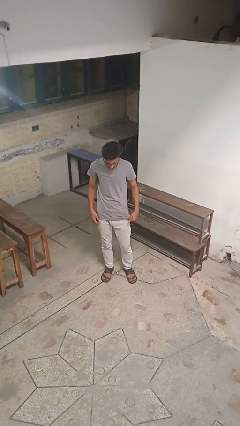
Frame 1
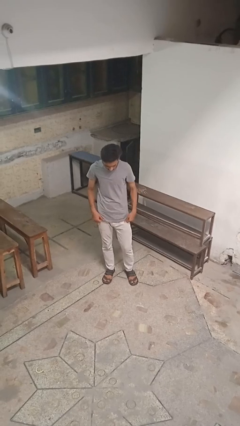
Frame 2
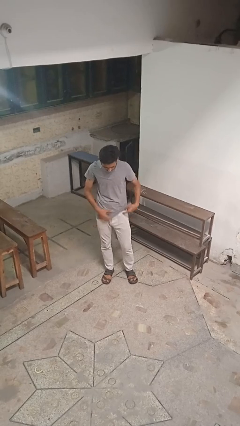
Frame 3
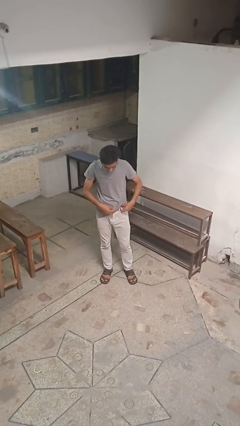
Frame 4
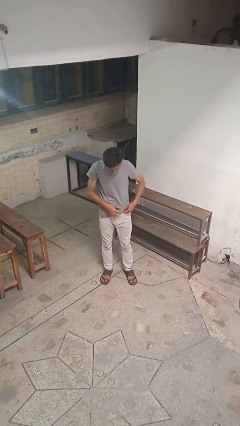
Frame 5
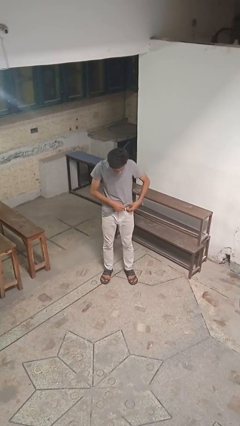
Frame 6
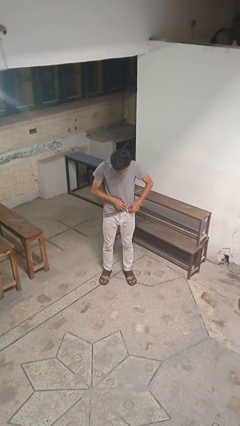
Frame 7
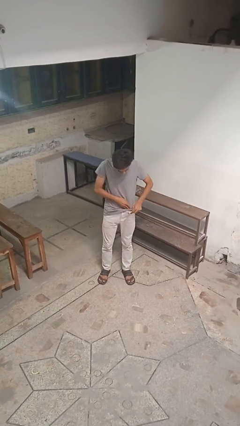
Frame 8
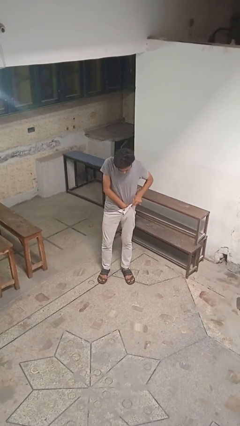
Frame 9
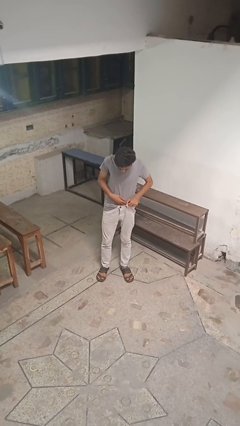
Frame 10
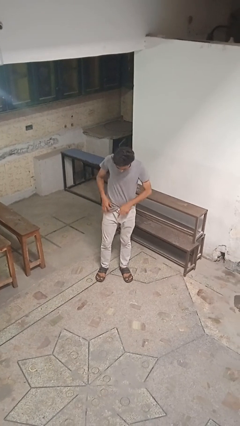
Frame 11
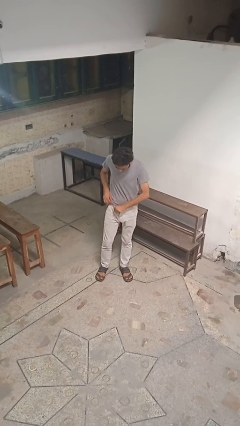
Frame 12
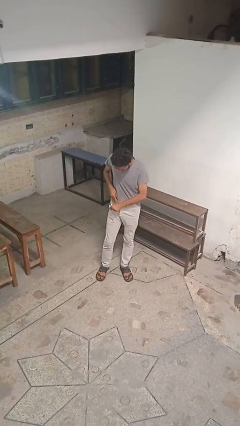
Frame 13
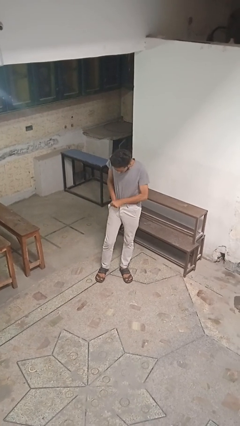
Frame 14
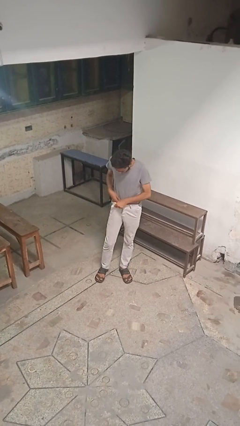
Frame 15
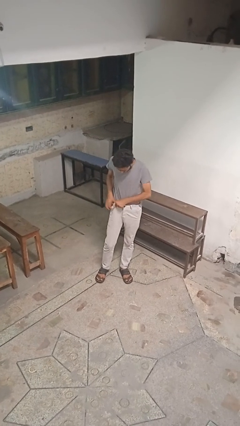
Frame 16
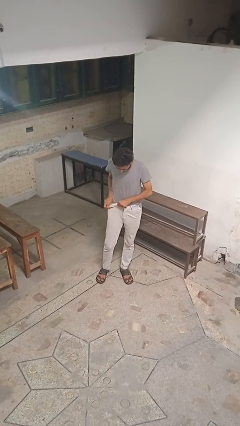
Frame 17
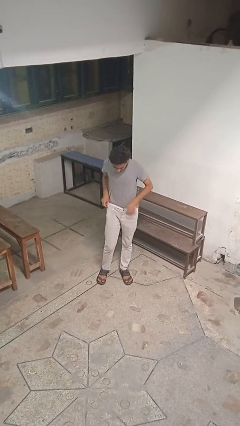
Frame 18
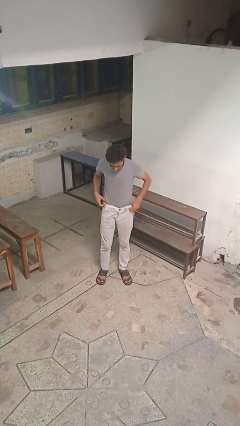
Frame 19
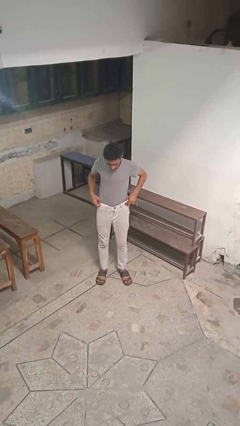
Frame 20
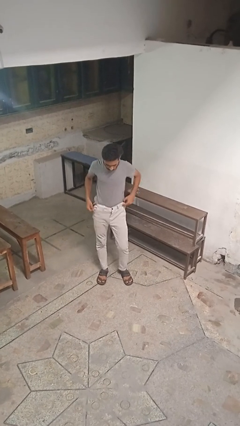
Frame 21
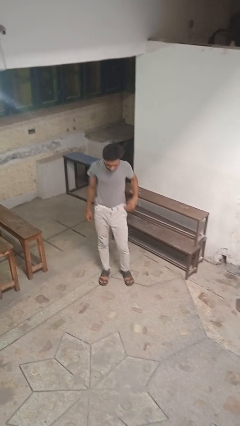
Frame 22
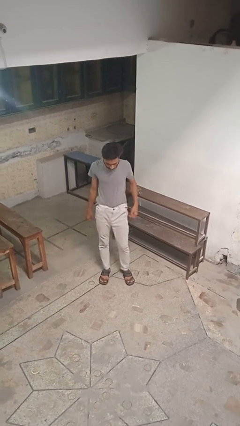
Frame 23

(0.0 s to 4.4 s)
person tucks in shirt

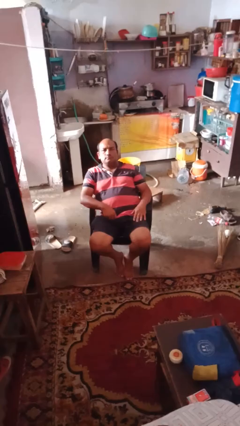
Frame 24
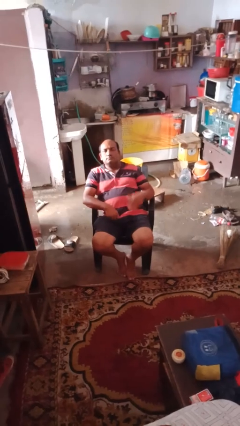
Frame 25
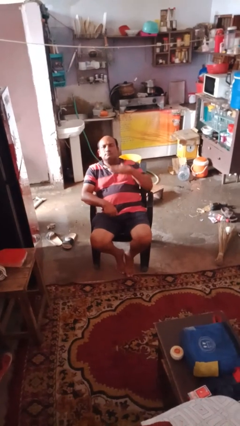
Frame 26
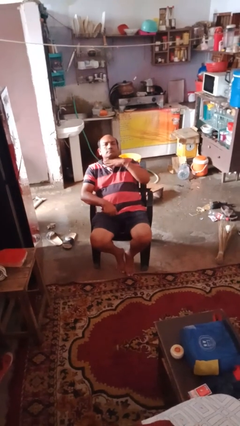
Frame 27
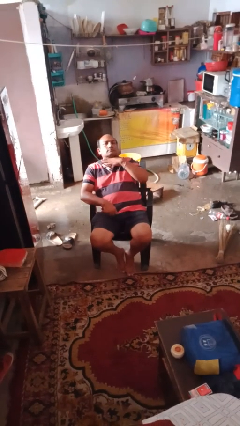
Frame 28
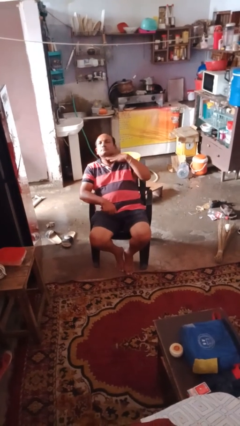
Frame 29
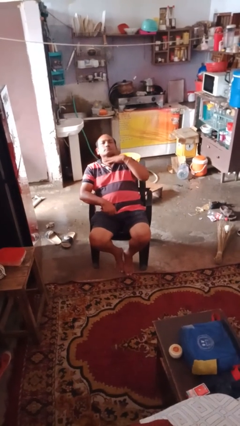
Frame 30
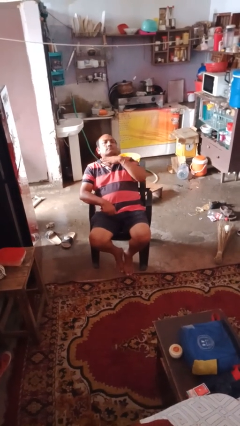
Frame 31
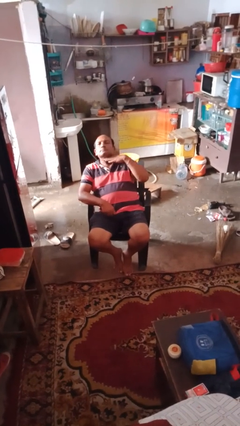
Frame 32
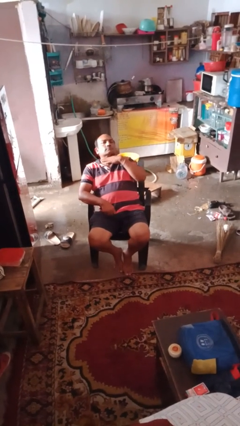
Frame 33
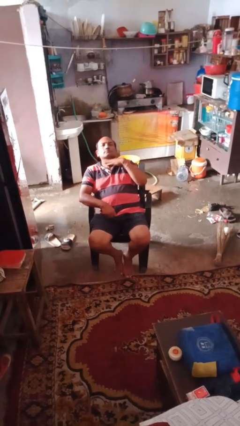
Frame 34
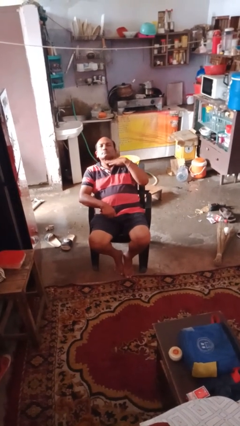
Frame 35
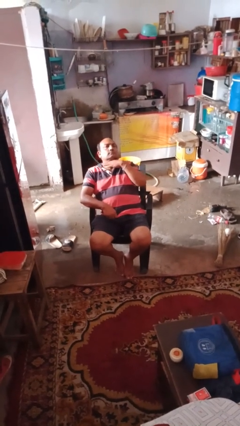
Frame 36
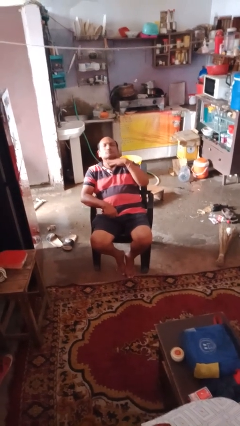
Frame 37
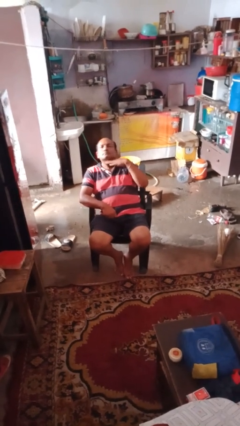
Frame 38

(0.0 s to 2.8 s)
person gestures cut

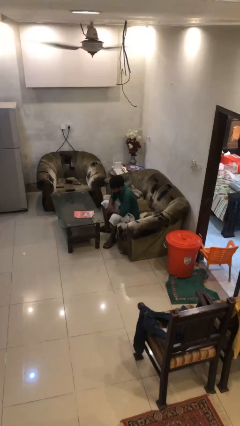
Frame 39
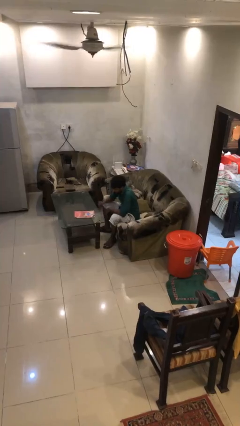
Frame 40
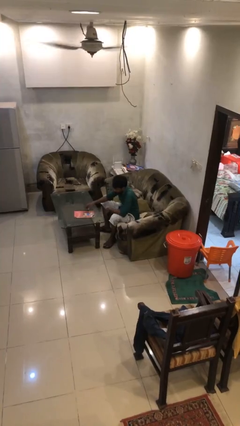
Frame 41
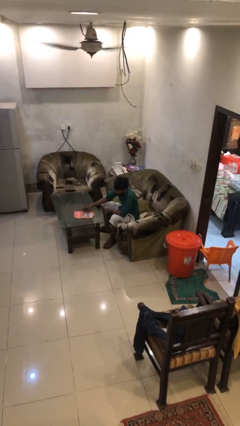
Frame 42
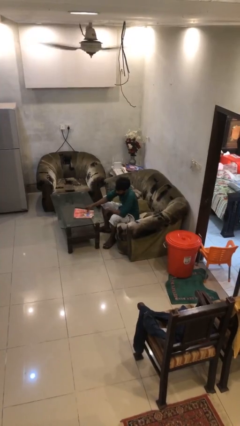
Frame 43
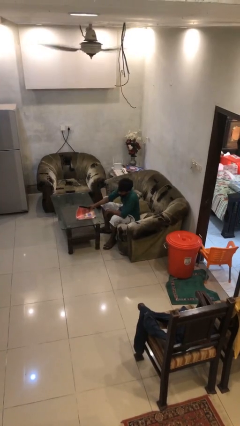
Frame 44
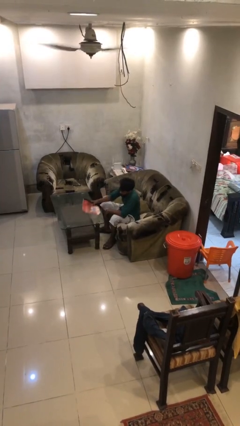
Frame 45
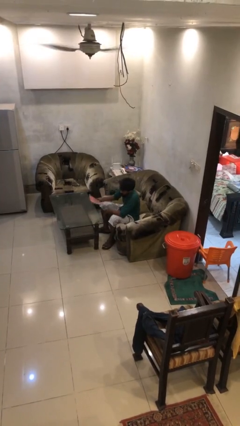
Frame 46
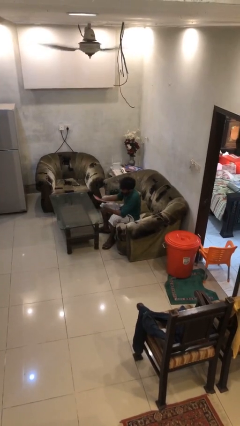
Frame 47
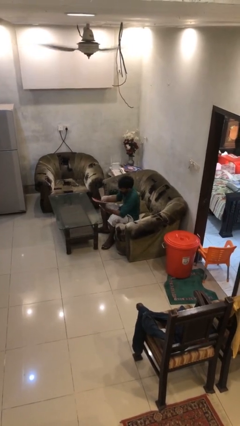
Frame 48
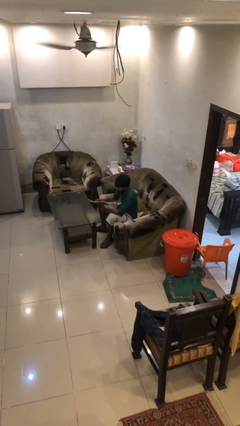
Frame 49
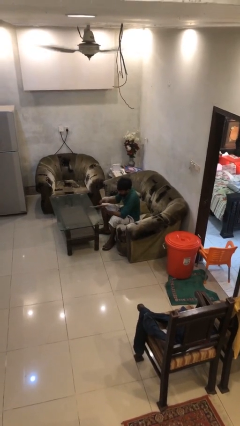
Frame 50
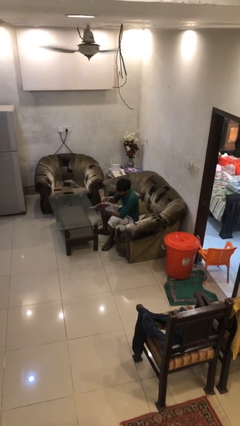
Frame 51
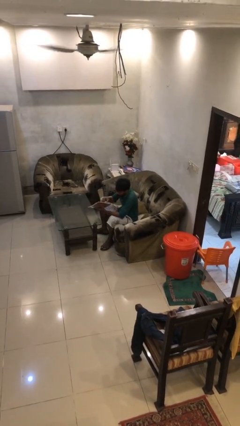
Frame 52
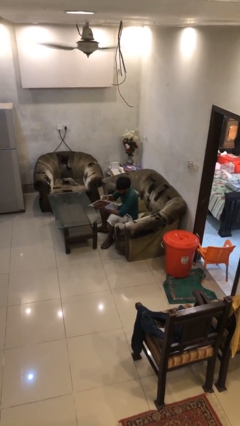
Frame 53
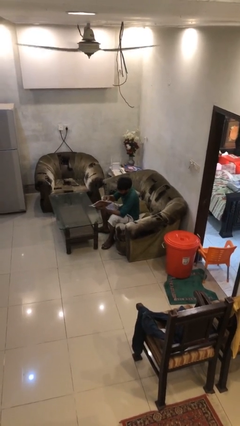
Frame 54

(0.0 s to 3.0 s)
person picks up object from table

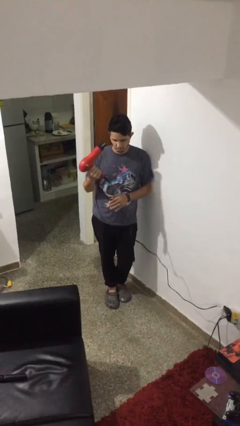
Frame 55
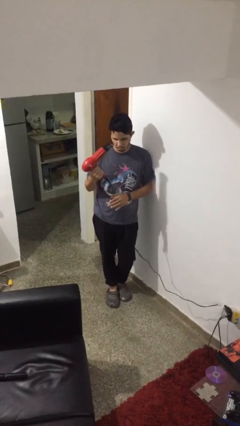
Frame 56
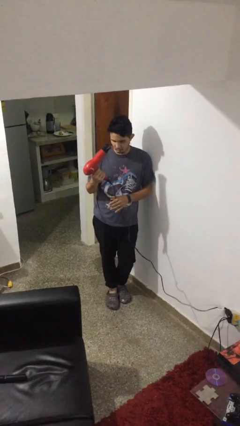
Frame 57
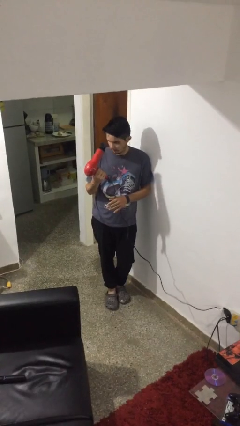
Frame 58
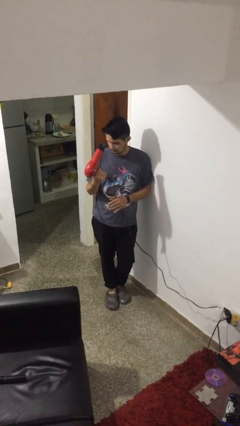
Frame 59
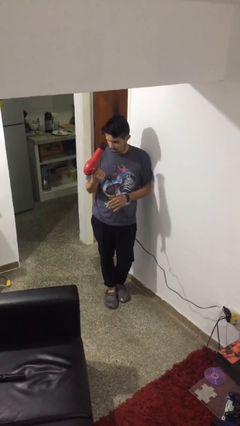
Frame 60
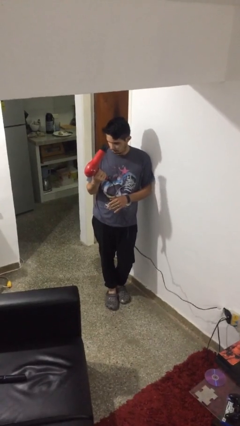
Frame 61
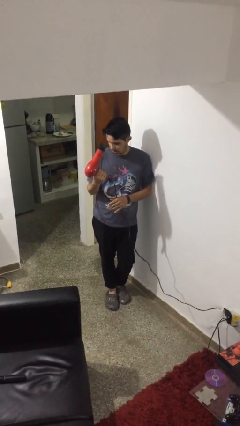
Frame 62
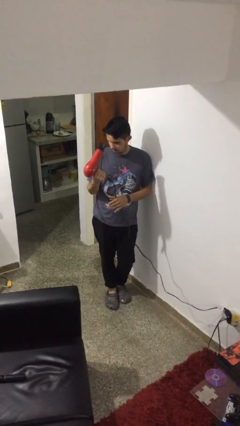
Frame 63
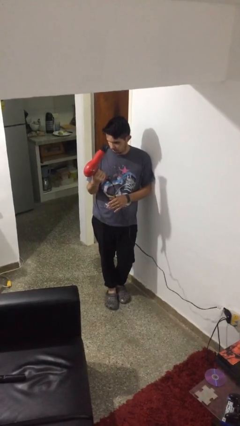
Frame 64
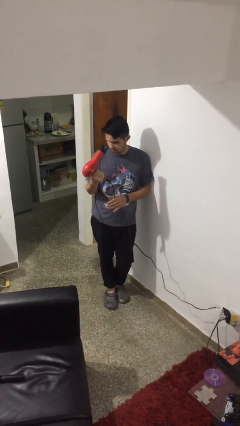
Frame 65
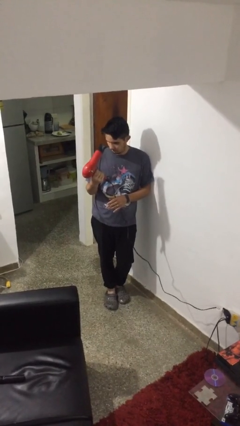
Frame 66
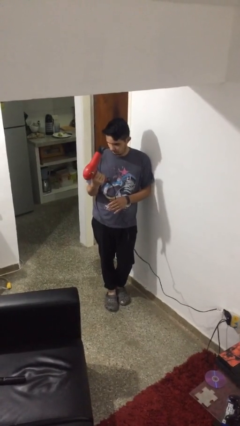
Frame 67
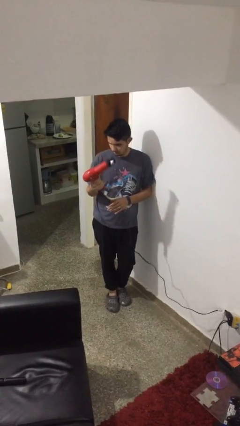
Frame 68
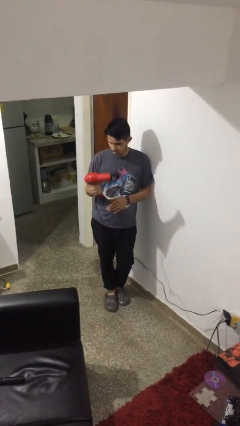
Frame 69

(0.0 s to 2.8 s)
person dries hair with hairdryer

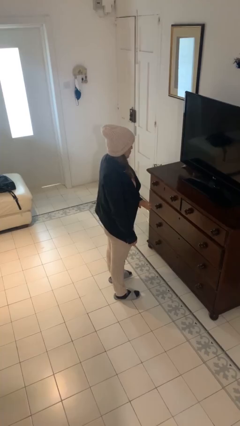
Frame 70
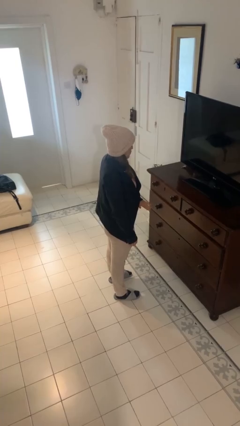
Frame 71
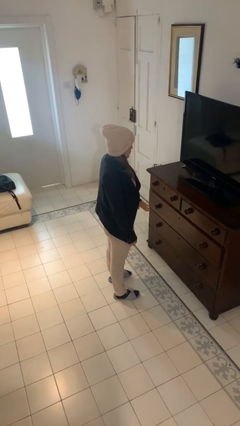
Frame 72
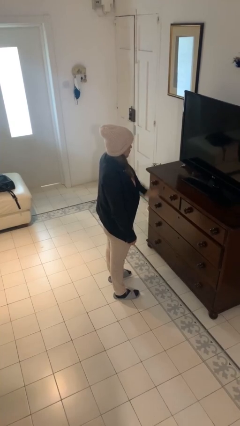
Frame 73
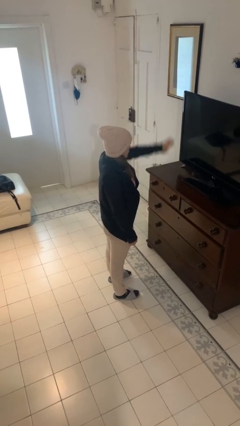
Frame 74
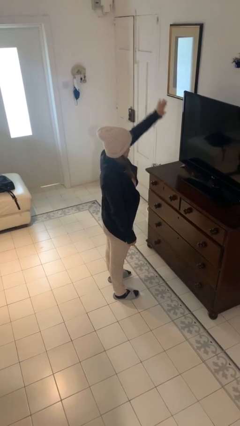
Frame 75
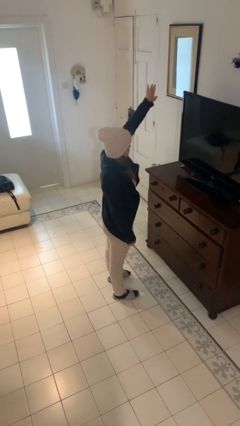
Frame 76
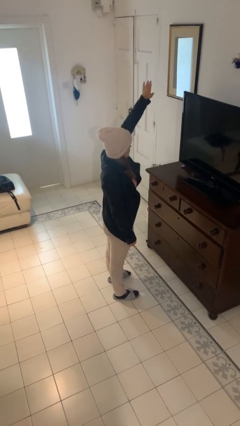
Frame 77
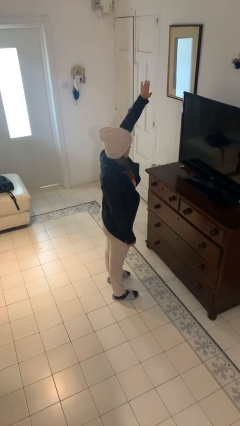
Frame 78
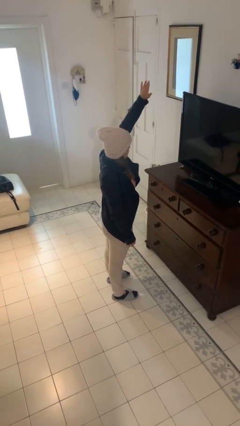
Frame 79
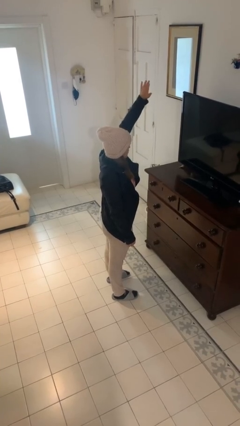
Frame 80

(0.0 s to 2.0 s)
person gestures swipe up

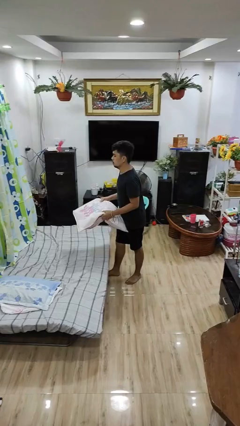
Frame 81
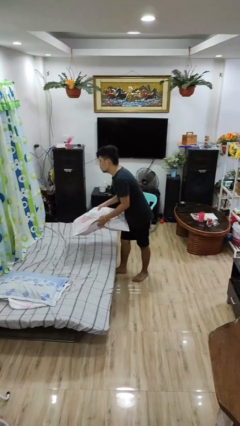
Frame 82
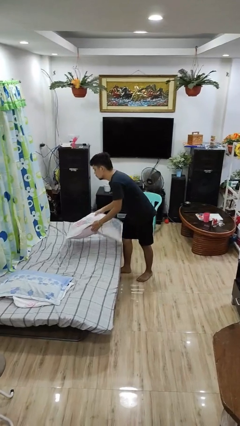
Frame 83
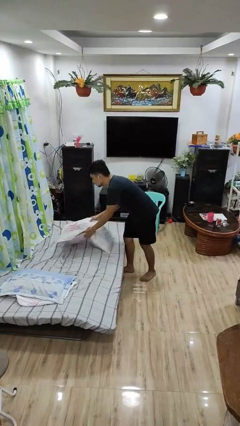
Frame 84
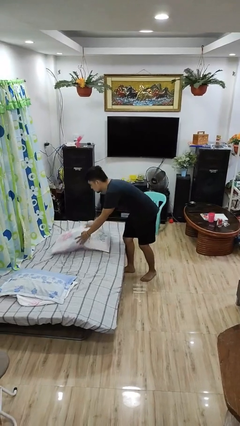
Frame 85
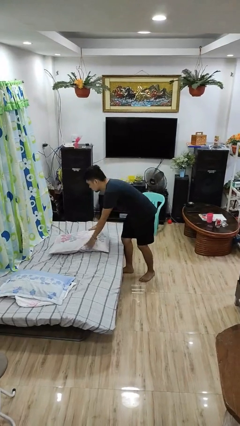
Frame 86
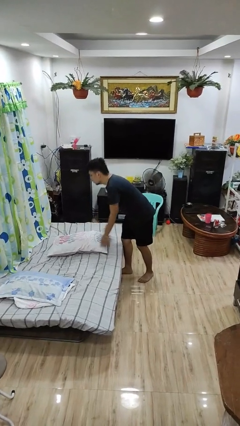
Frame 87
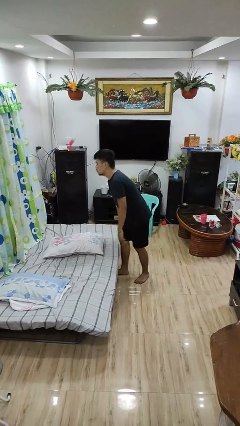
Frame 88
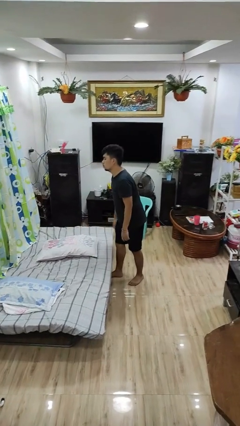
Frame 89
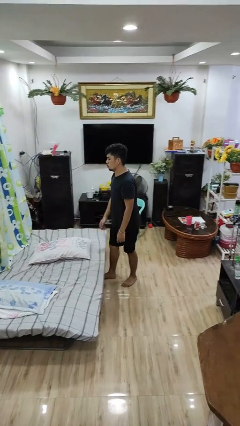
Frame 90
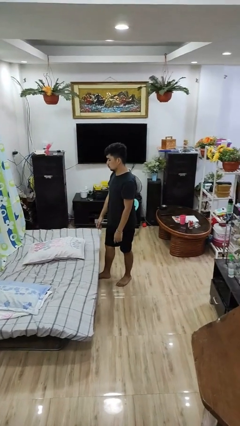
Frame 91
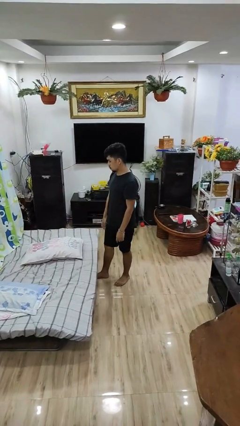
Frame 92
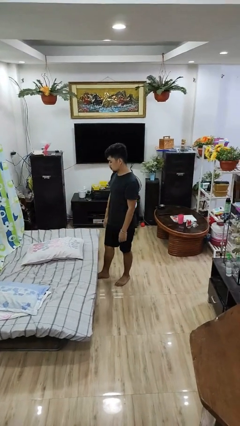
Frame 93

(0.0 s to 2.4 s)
person puts down object on bed
